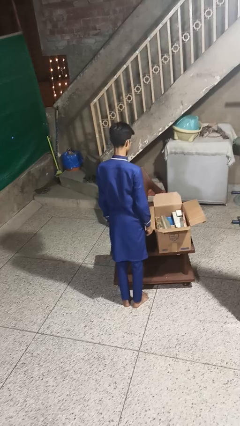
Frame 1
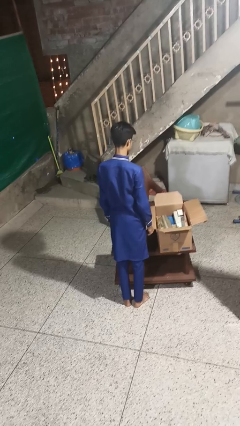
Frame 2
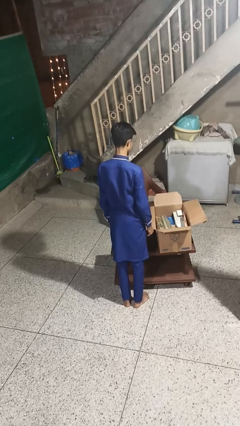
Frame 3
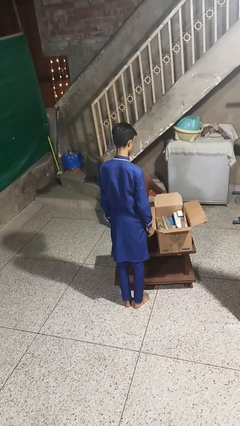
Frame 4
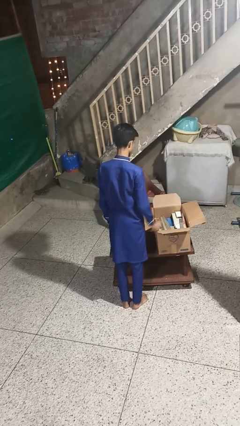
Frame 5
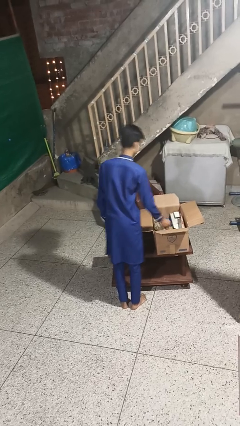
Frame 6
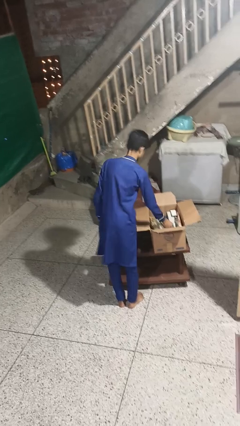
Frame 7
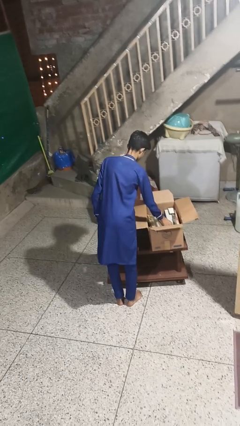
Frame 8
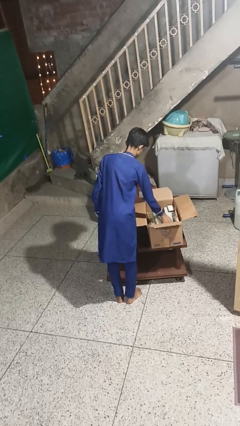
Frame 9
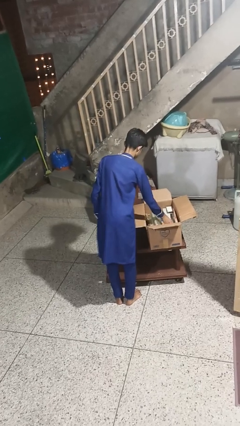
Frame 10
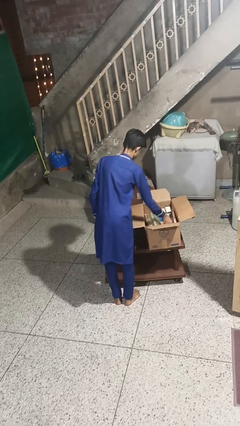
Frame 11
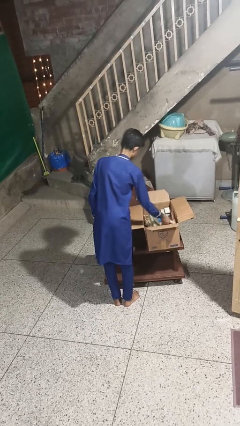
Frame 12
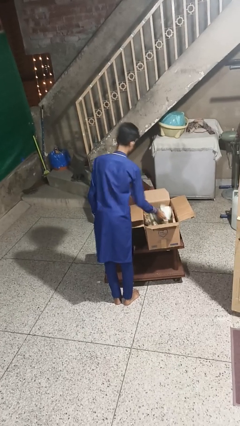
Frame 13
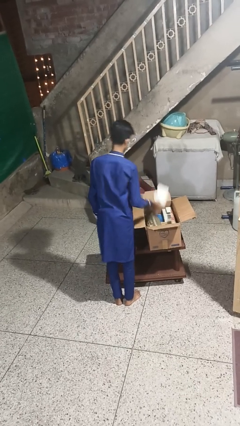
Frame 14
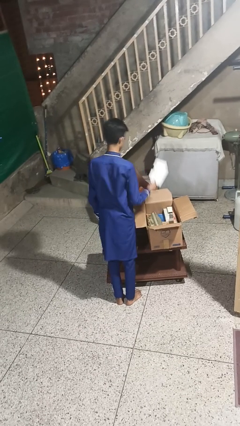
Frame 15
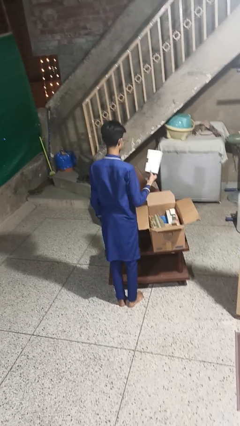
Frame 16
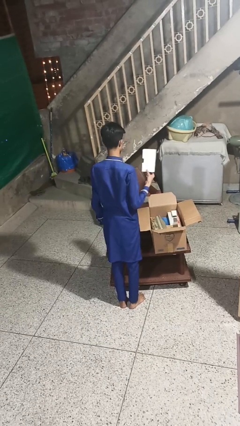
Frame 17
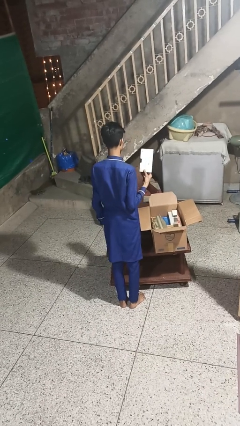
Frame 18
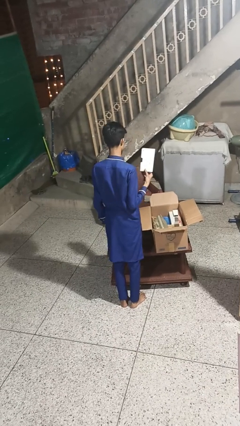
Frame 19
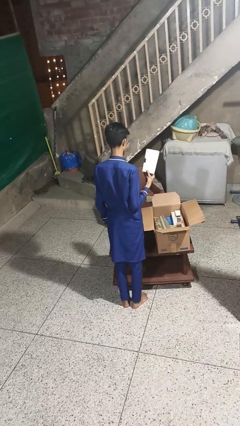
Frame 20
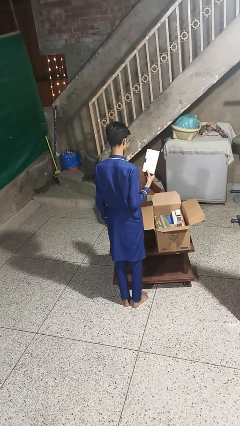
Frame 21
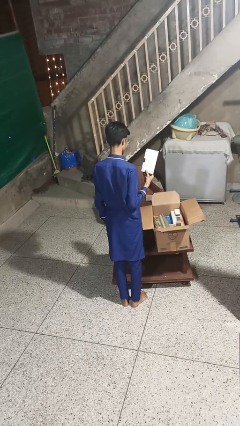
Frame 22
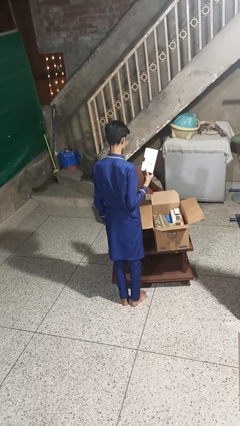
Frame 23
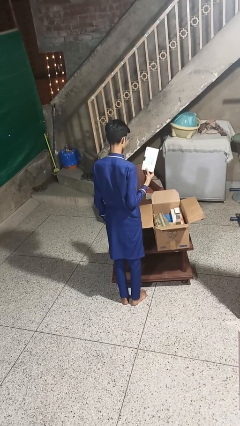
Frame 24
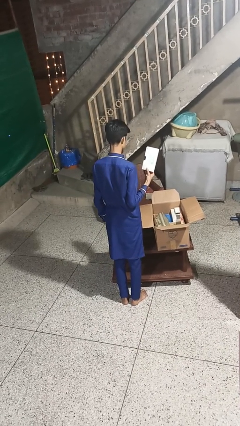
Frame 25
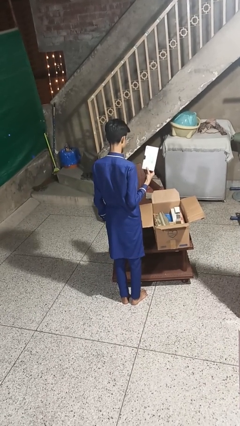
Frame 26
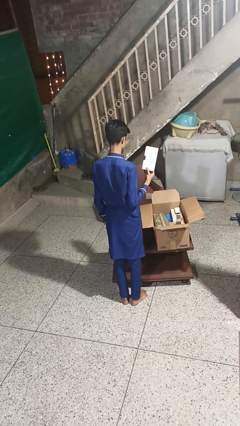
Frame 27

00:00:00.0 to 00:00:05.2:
person takes object from box

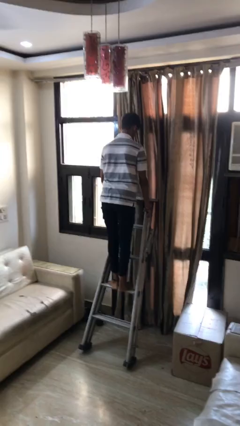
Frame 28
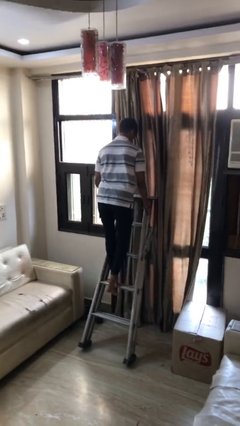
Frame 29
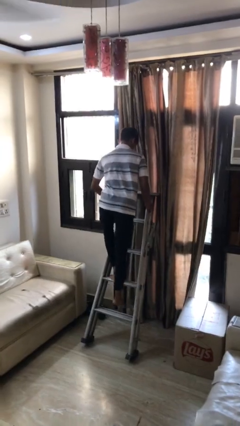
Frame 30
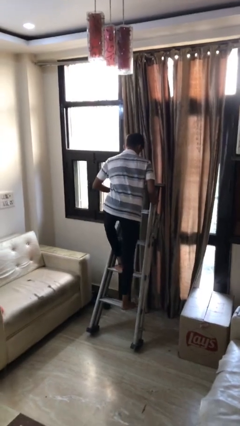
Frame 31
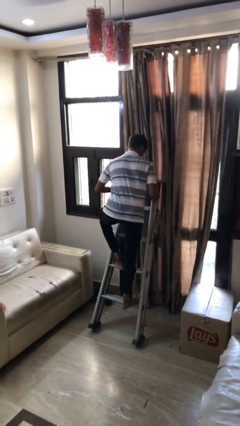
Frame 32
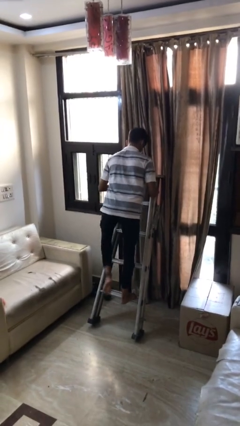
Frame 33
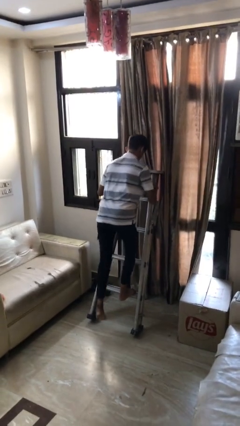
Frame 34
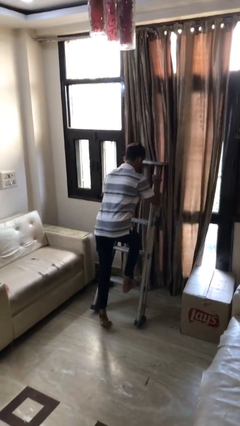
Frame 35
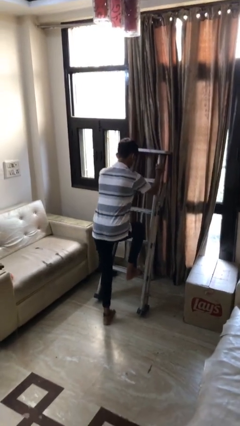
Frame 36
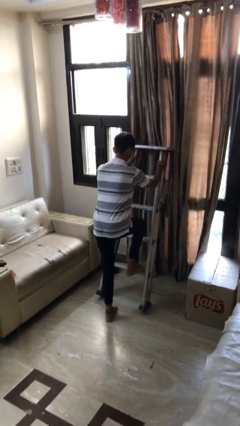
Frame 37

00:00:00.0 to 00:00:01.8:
person climbs down ladder

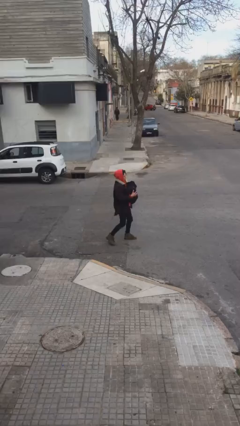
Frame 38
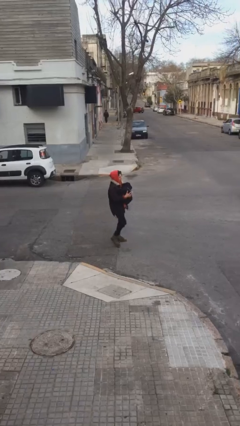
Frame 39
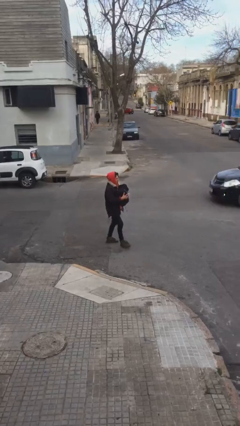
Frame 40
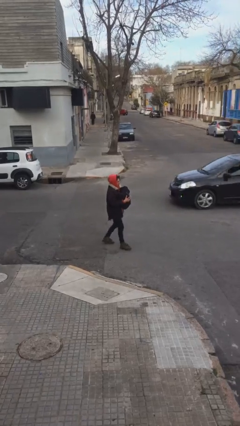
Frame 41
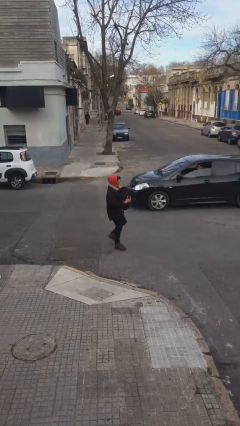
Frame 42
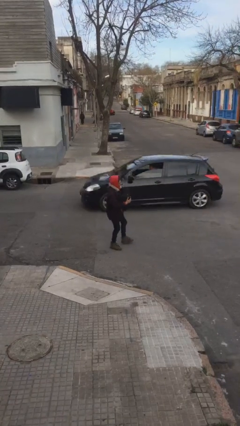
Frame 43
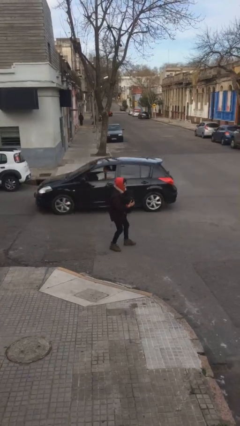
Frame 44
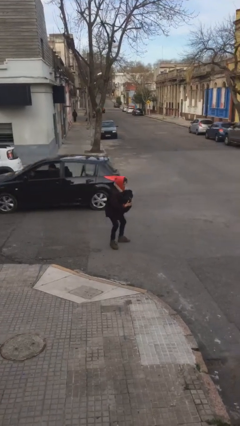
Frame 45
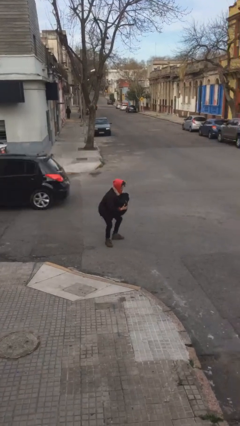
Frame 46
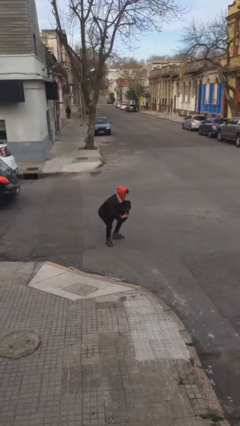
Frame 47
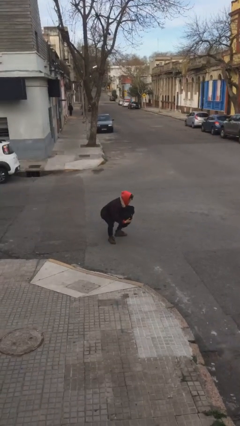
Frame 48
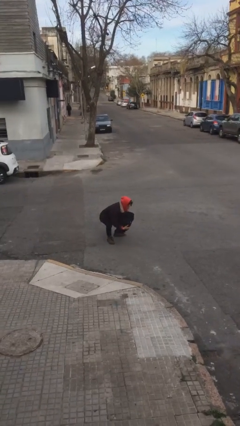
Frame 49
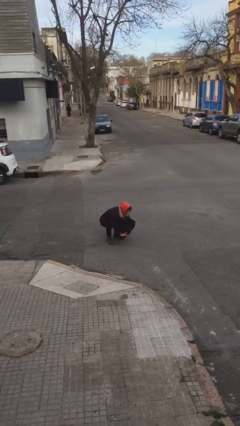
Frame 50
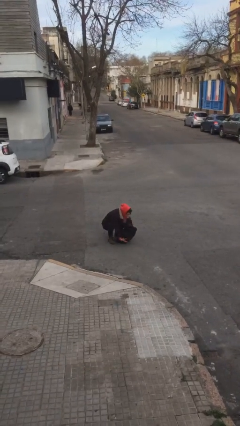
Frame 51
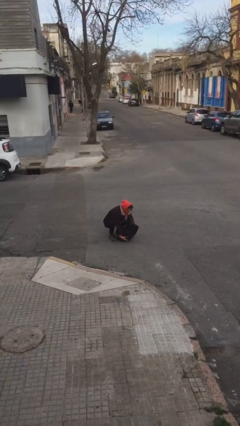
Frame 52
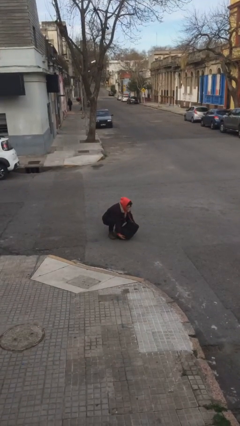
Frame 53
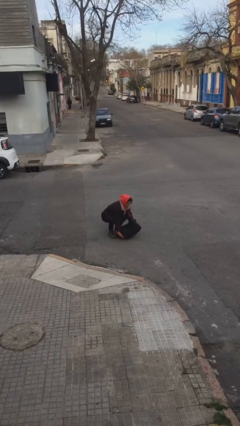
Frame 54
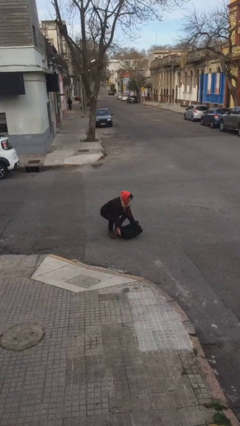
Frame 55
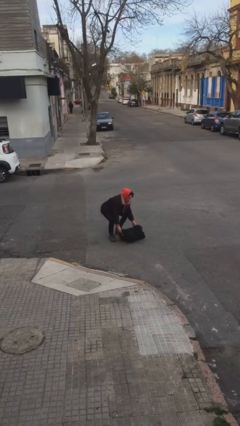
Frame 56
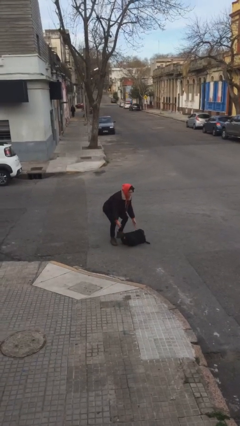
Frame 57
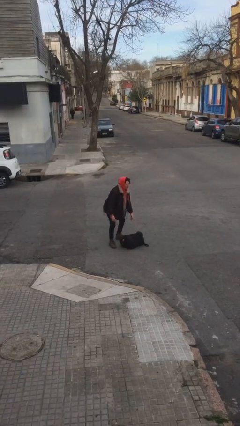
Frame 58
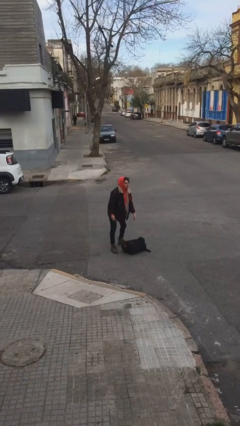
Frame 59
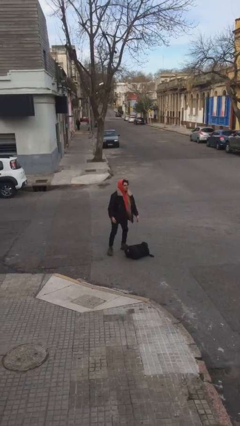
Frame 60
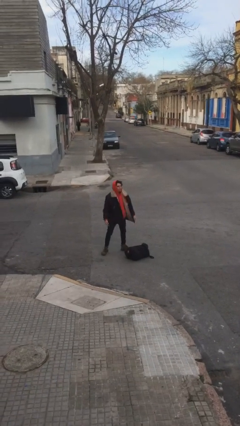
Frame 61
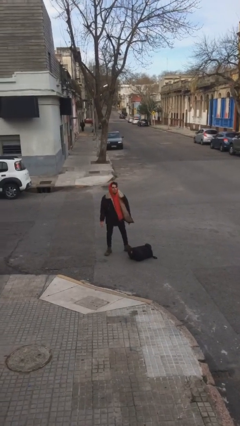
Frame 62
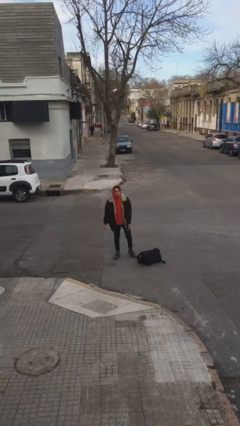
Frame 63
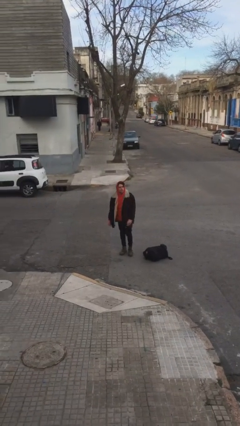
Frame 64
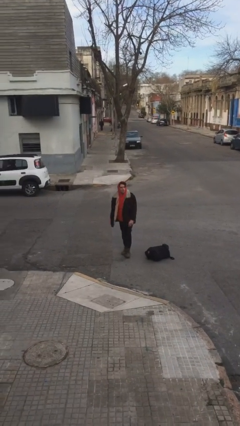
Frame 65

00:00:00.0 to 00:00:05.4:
person puts down object on floor

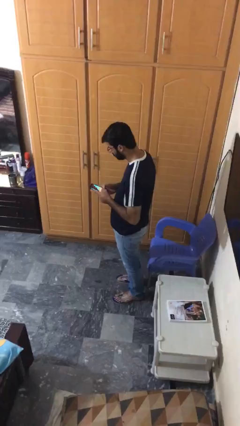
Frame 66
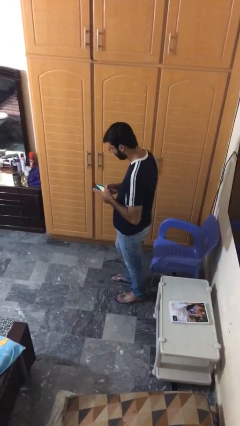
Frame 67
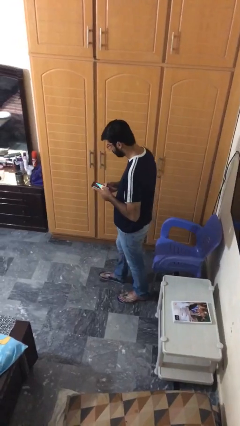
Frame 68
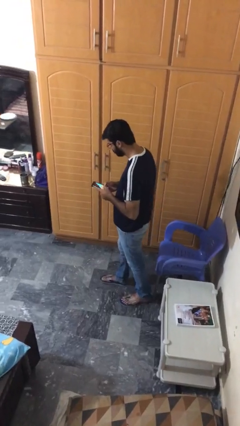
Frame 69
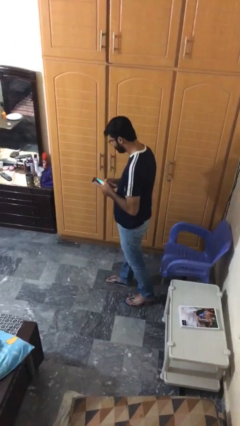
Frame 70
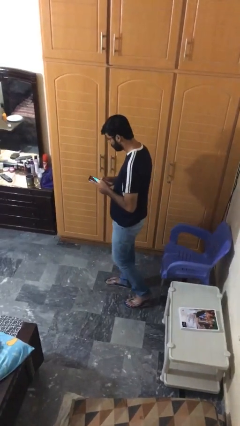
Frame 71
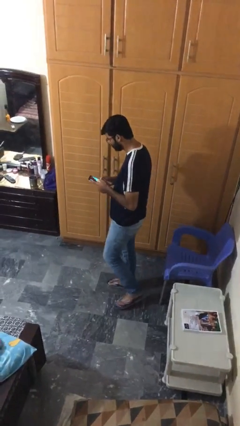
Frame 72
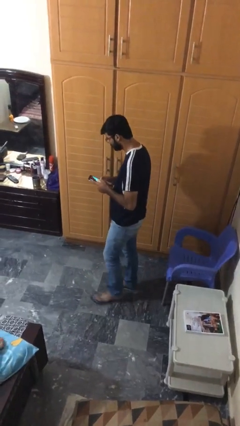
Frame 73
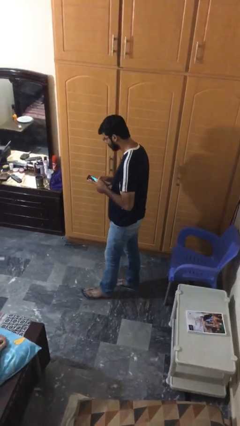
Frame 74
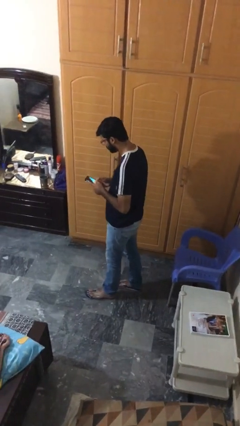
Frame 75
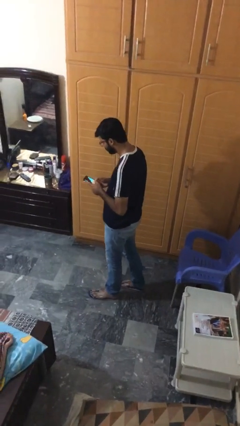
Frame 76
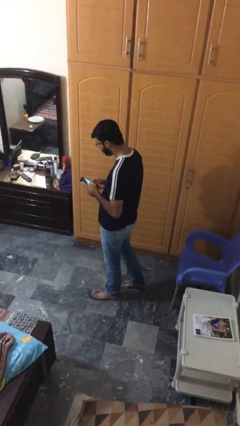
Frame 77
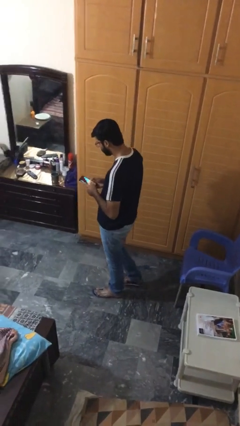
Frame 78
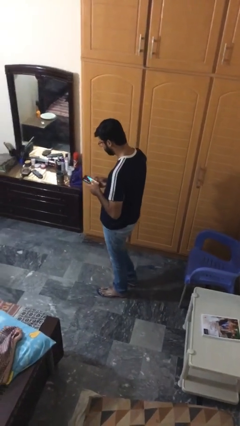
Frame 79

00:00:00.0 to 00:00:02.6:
person texts on phone

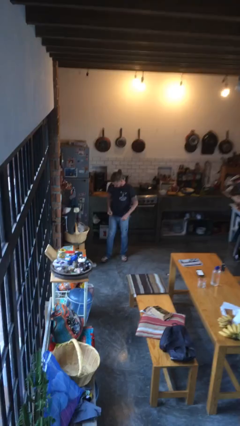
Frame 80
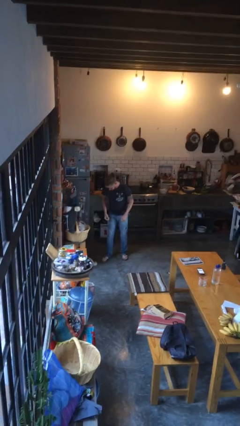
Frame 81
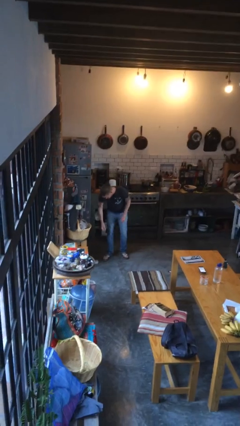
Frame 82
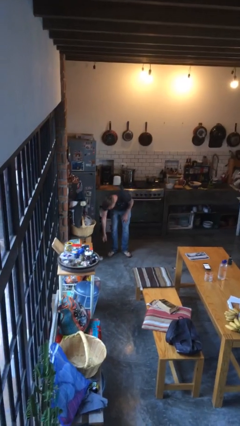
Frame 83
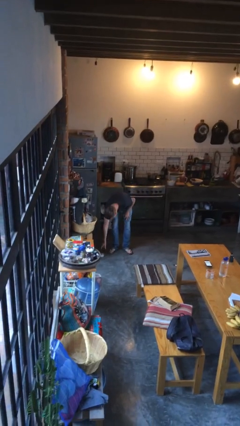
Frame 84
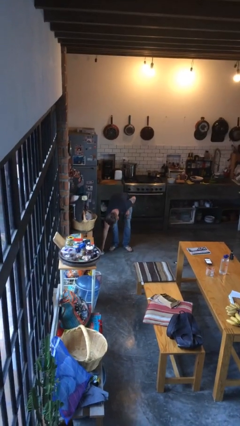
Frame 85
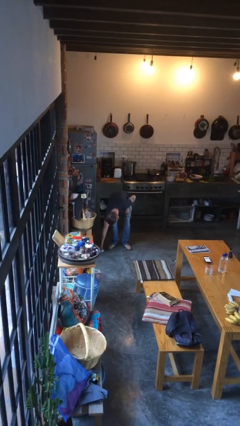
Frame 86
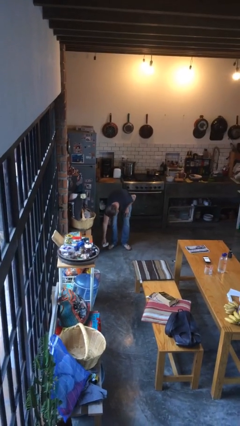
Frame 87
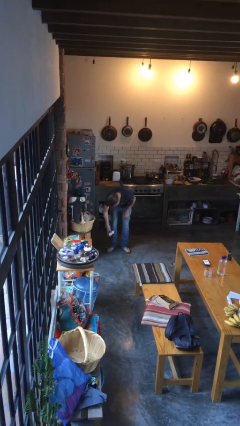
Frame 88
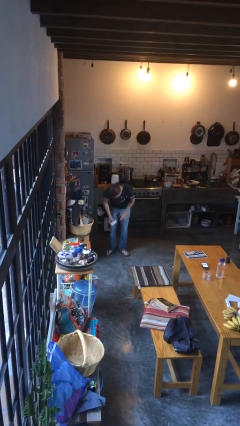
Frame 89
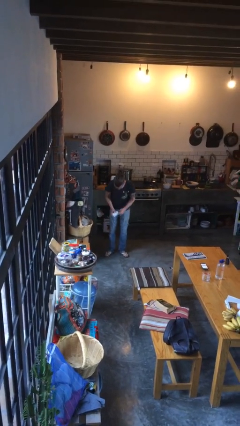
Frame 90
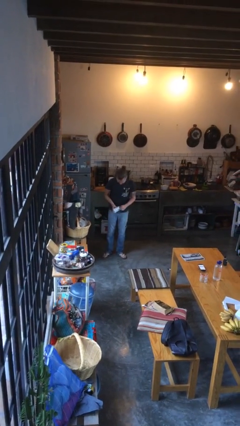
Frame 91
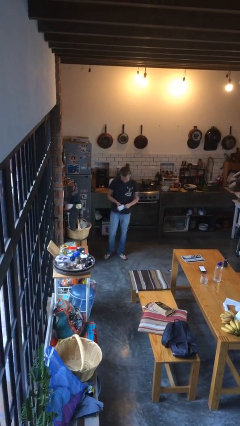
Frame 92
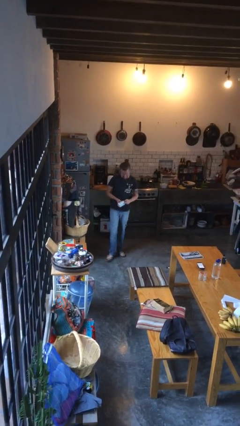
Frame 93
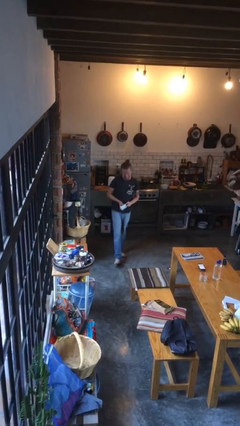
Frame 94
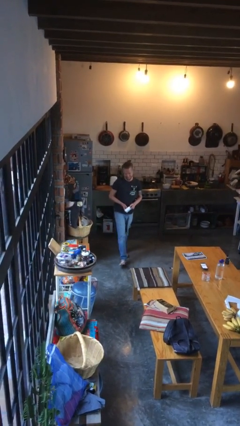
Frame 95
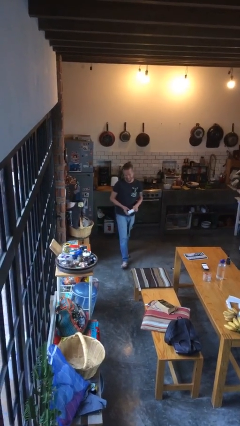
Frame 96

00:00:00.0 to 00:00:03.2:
person picks up object from floor
